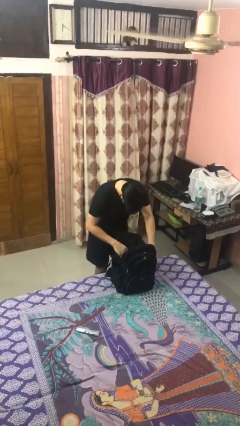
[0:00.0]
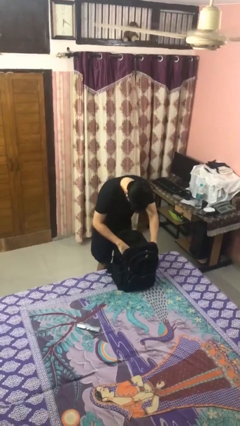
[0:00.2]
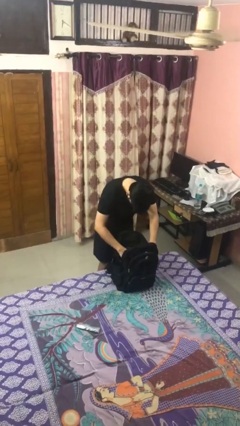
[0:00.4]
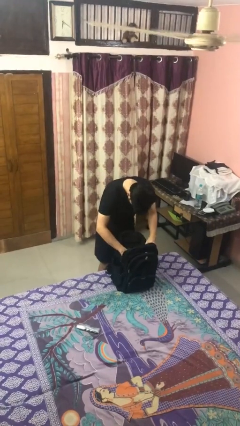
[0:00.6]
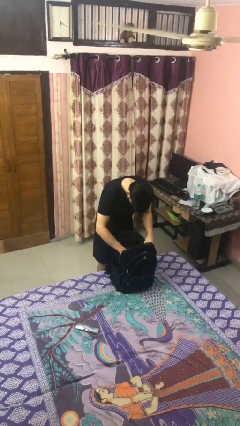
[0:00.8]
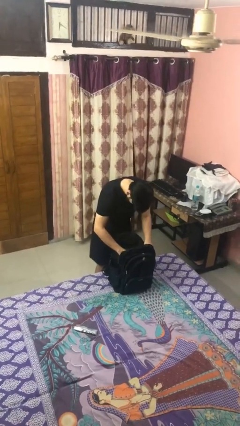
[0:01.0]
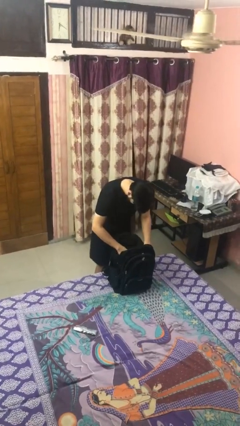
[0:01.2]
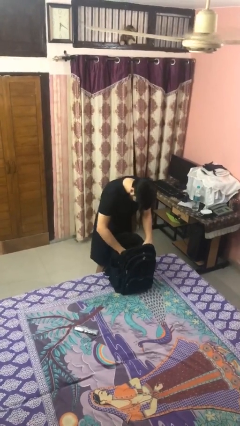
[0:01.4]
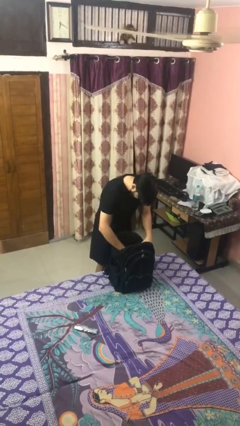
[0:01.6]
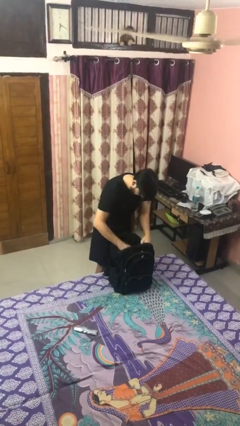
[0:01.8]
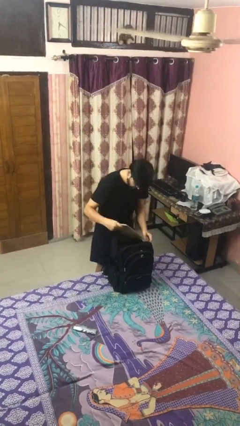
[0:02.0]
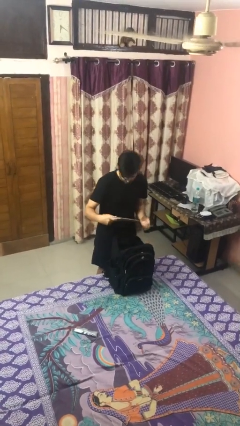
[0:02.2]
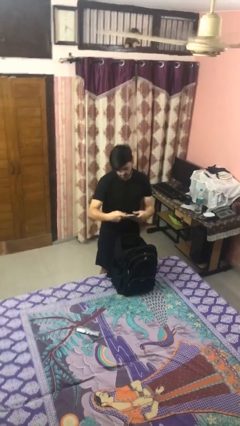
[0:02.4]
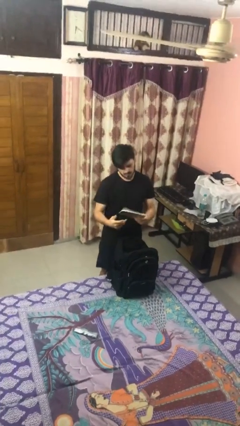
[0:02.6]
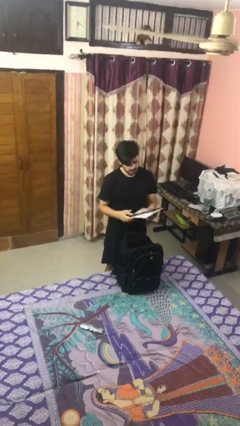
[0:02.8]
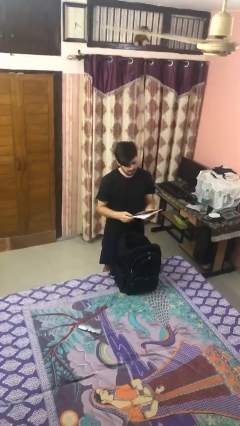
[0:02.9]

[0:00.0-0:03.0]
person takes object from backpack

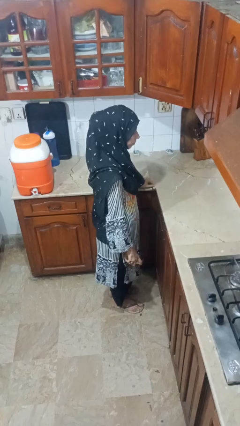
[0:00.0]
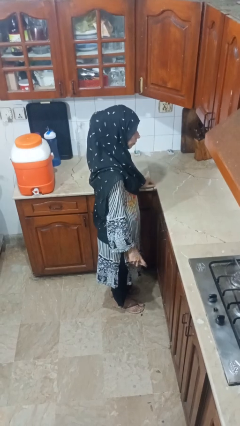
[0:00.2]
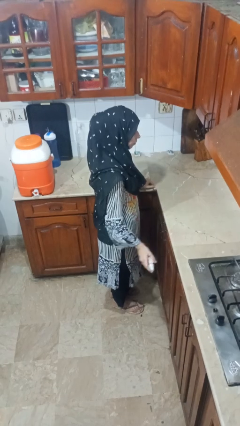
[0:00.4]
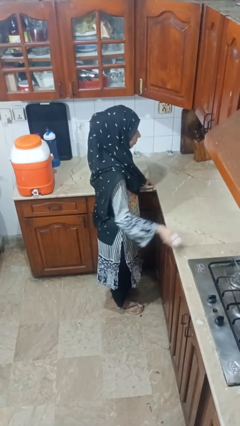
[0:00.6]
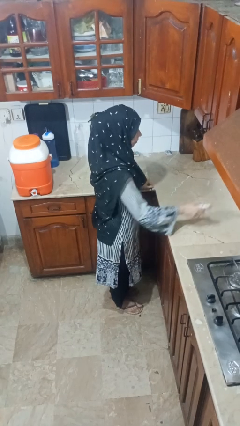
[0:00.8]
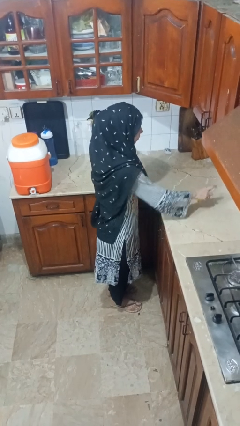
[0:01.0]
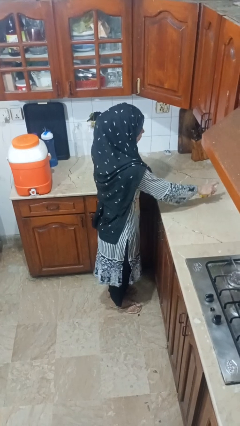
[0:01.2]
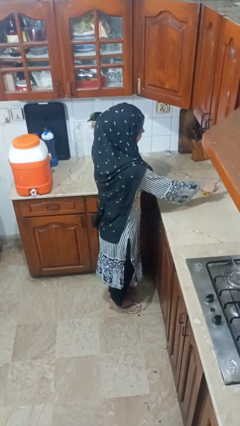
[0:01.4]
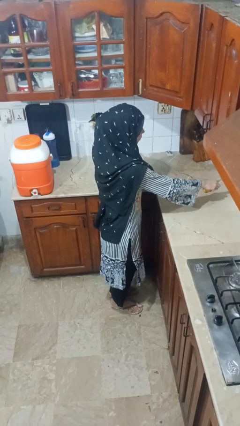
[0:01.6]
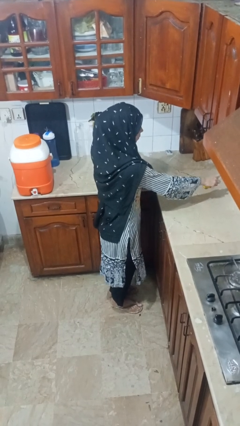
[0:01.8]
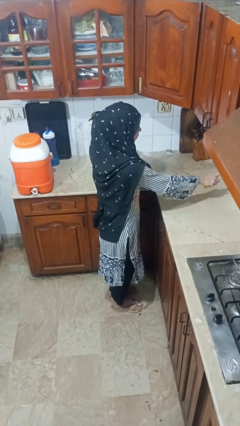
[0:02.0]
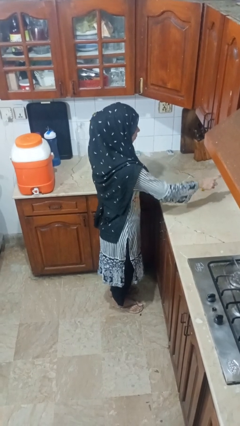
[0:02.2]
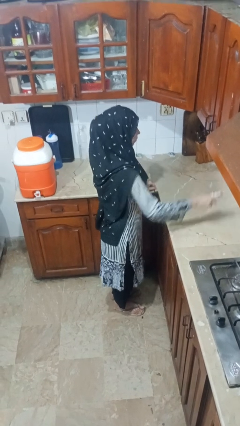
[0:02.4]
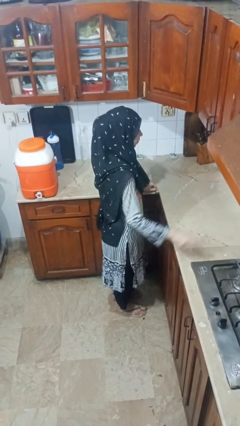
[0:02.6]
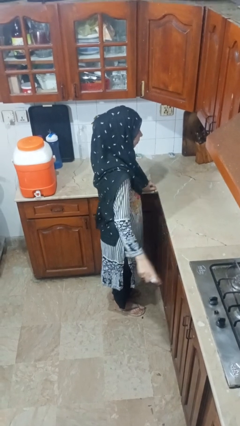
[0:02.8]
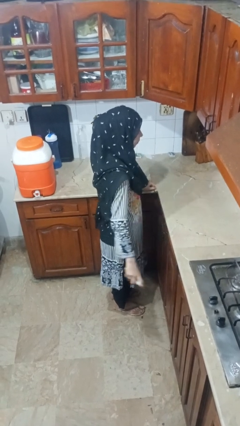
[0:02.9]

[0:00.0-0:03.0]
person sprays from bottle

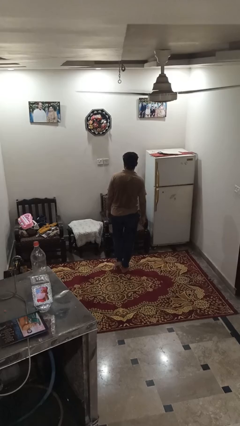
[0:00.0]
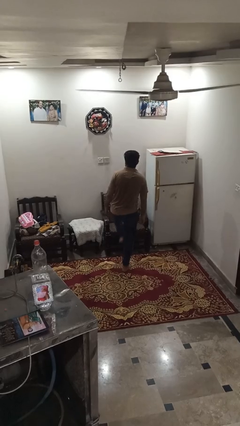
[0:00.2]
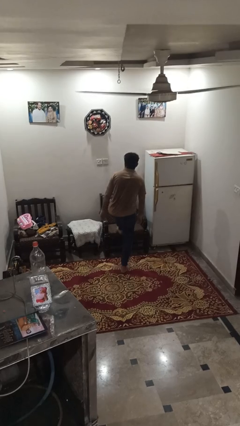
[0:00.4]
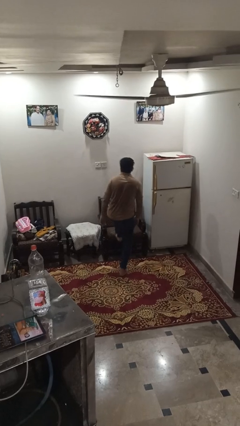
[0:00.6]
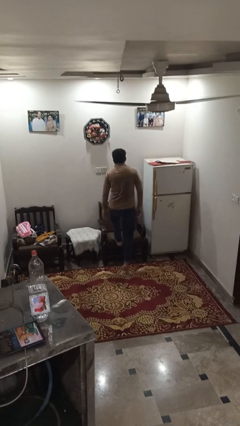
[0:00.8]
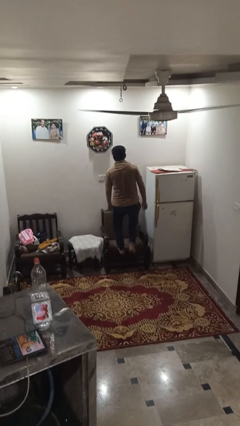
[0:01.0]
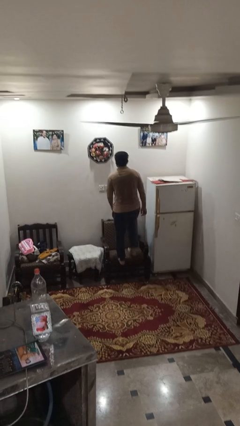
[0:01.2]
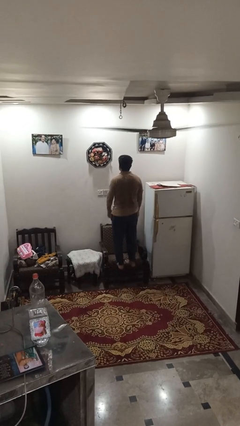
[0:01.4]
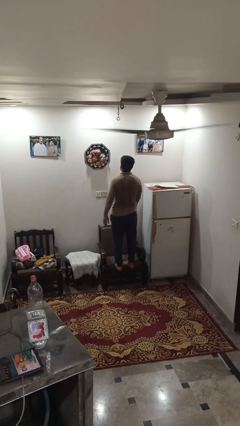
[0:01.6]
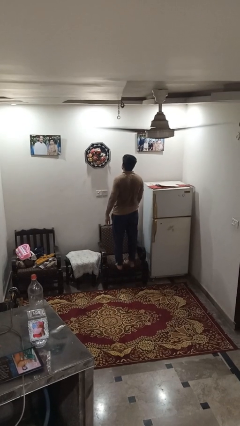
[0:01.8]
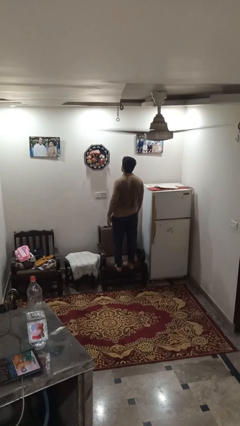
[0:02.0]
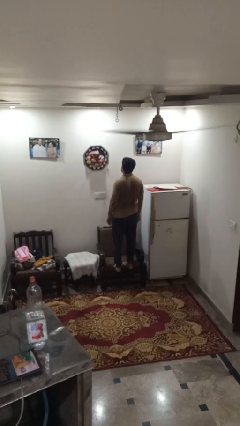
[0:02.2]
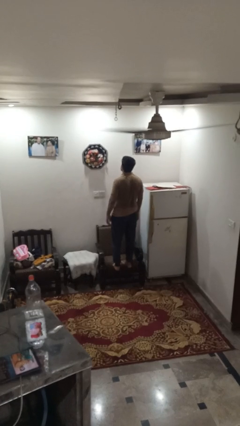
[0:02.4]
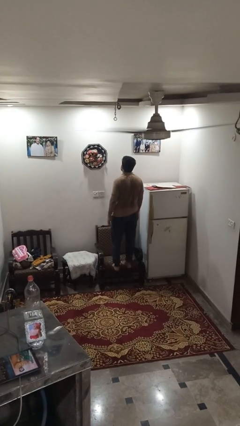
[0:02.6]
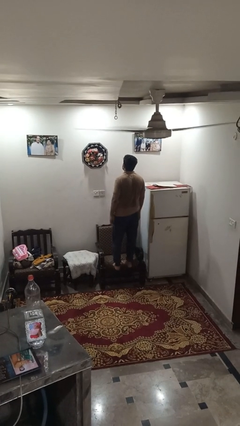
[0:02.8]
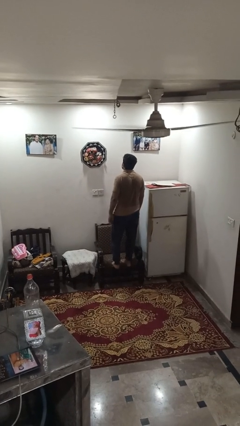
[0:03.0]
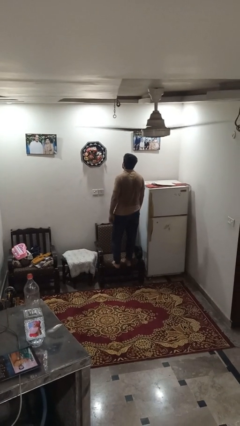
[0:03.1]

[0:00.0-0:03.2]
person climbs on couch

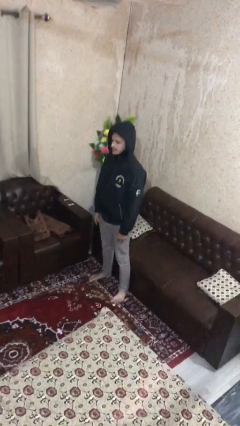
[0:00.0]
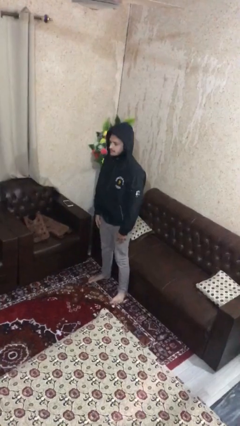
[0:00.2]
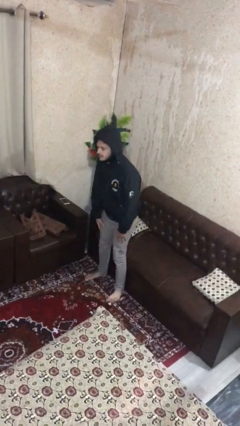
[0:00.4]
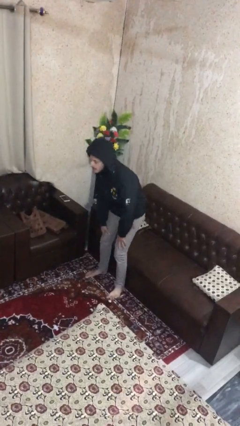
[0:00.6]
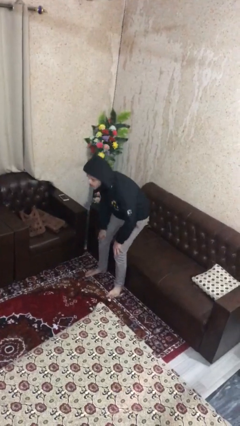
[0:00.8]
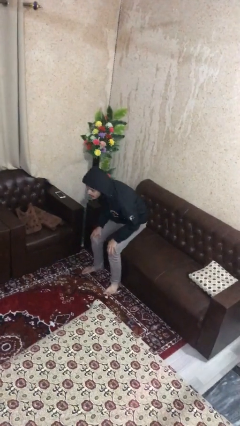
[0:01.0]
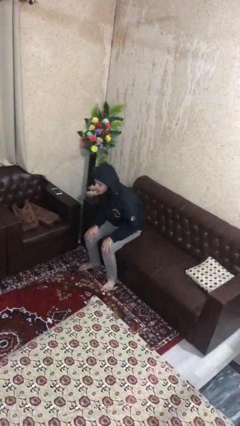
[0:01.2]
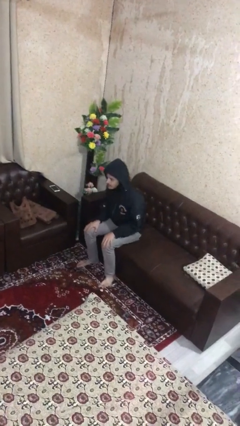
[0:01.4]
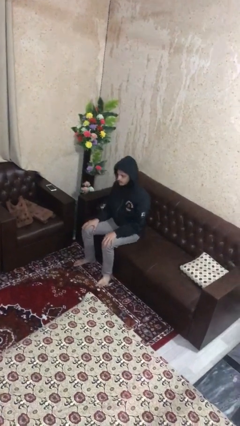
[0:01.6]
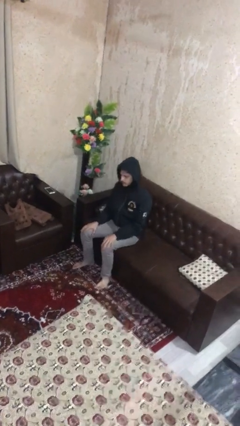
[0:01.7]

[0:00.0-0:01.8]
person sits down

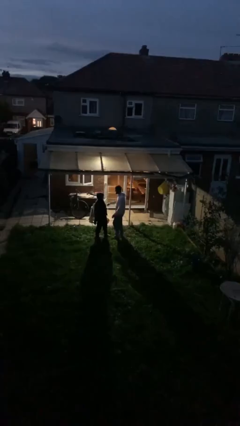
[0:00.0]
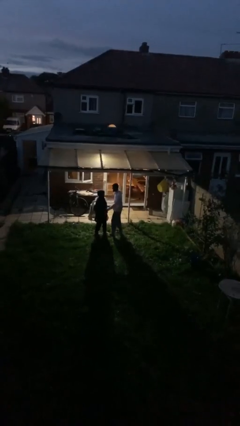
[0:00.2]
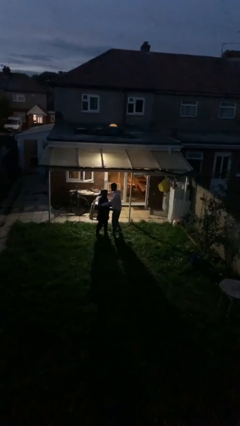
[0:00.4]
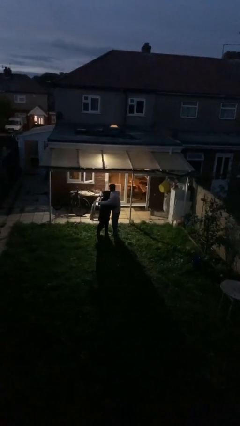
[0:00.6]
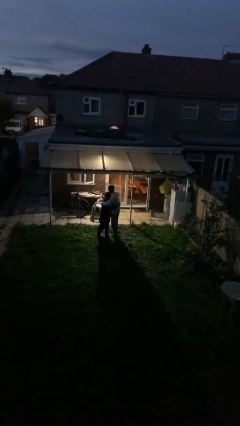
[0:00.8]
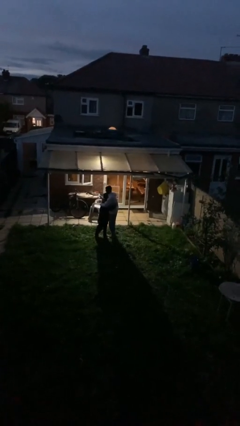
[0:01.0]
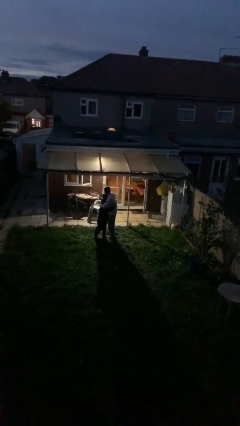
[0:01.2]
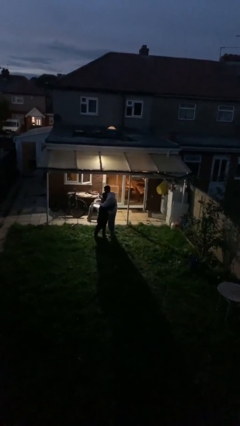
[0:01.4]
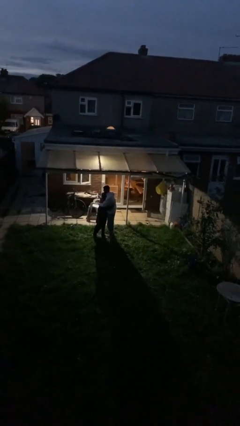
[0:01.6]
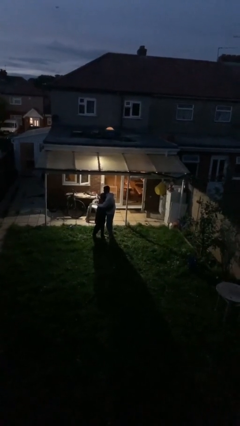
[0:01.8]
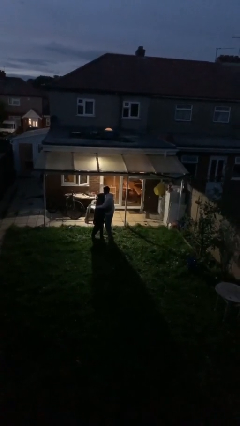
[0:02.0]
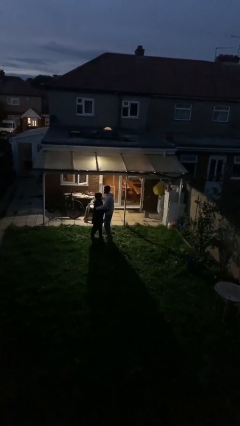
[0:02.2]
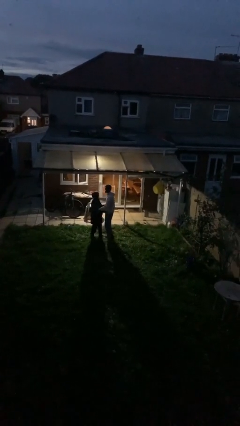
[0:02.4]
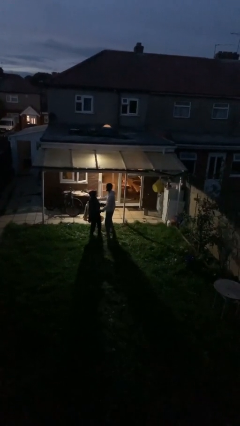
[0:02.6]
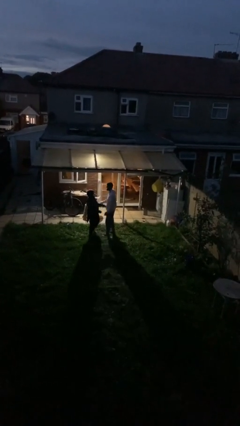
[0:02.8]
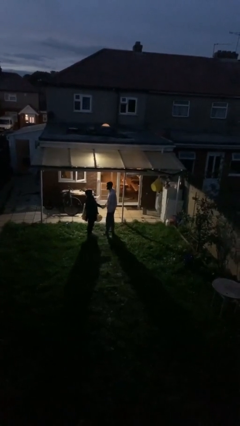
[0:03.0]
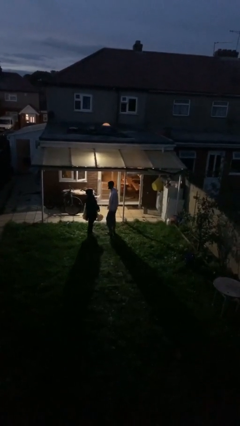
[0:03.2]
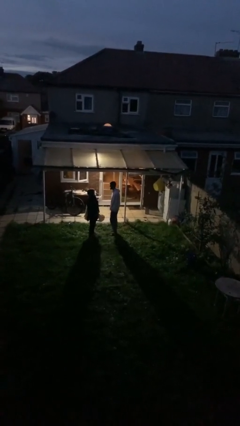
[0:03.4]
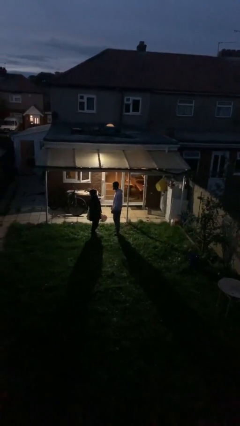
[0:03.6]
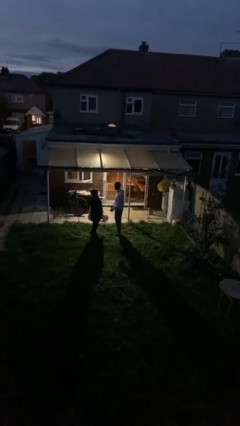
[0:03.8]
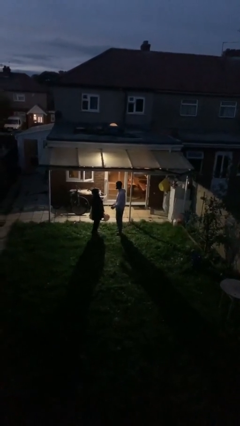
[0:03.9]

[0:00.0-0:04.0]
person embraces person

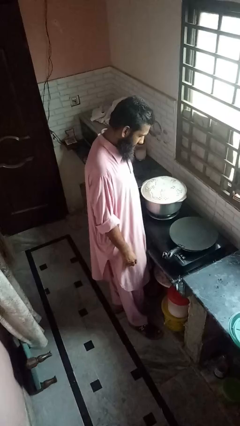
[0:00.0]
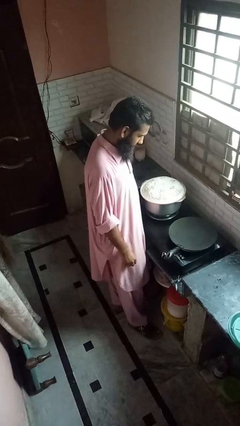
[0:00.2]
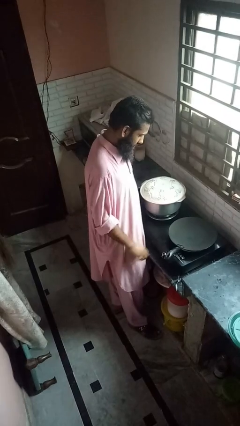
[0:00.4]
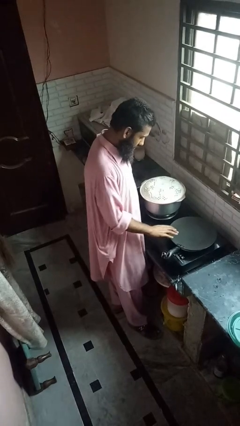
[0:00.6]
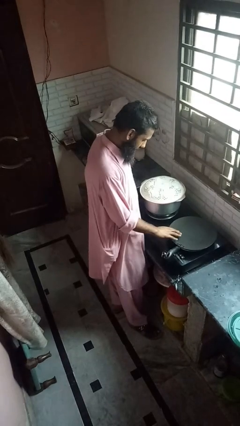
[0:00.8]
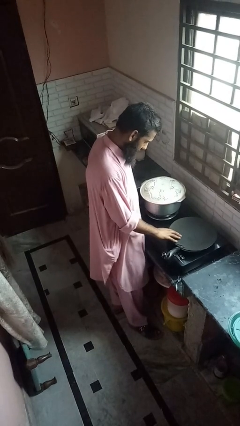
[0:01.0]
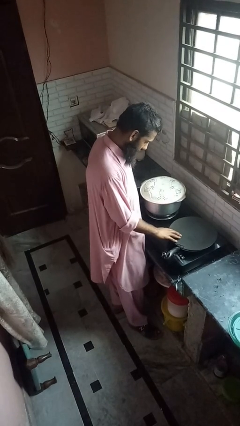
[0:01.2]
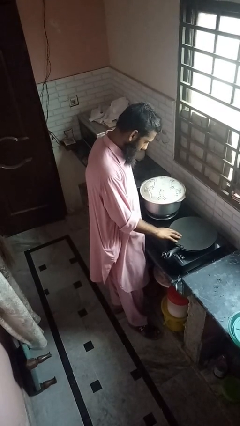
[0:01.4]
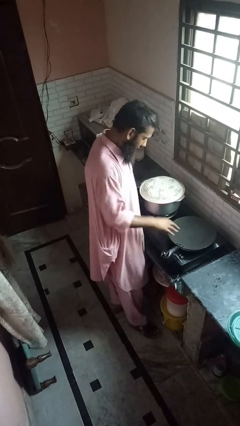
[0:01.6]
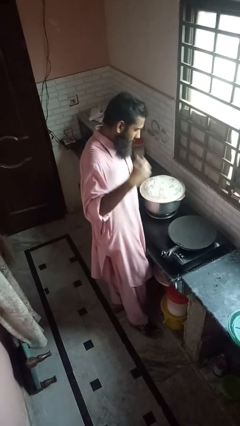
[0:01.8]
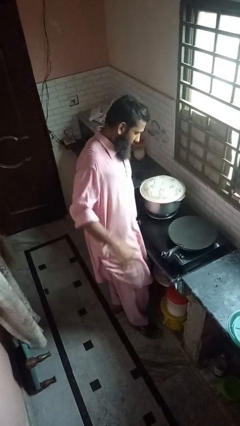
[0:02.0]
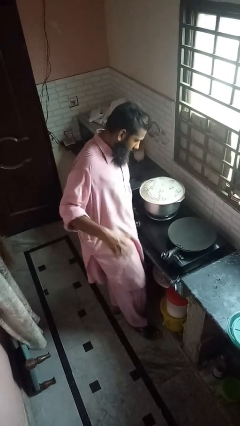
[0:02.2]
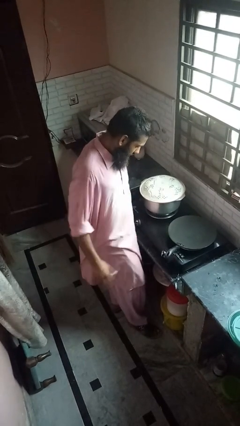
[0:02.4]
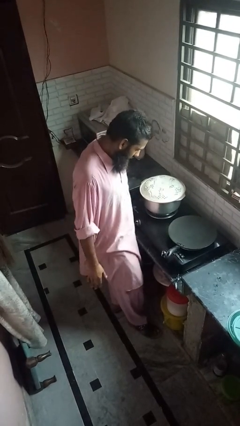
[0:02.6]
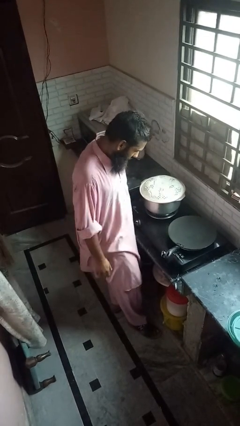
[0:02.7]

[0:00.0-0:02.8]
person burns hand
